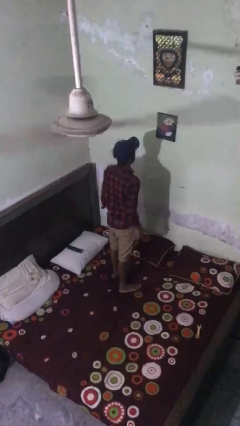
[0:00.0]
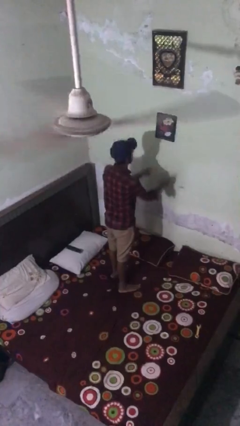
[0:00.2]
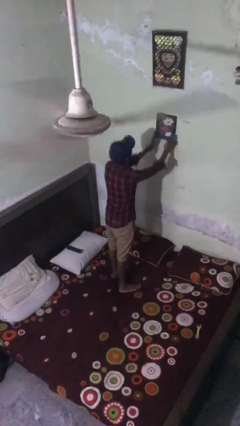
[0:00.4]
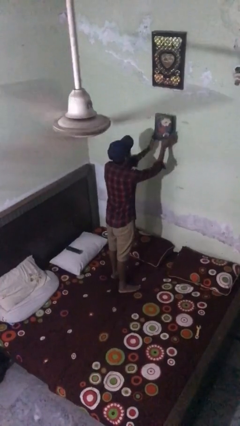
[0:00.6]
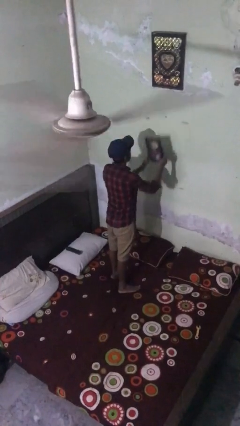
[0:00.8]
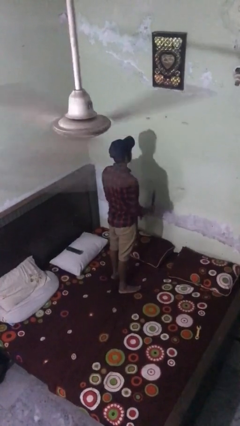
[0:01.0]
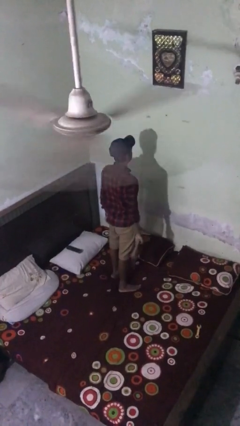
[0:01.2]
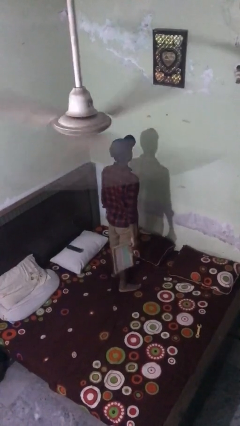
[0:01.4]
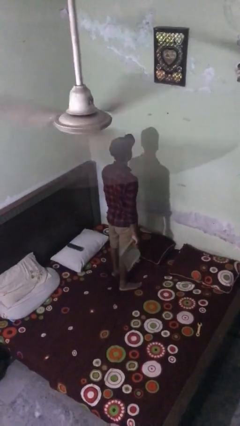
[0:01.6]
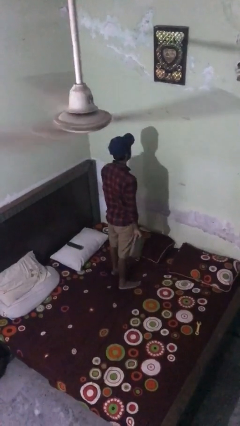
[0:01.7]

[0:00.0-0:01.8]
person takes down picture frame

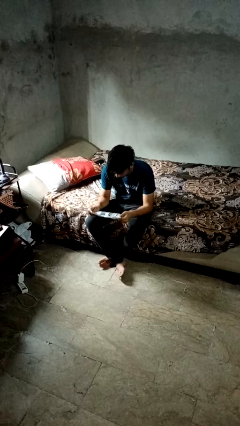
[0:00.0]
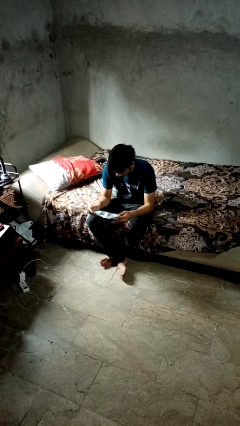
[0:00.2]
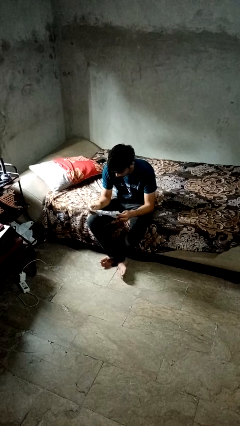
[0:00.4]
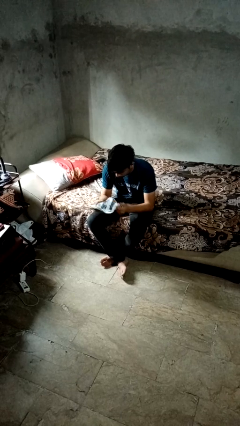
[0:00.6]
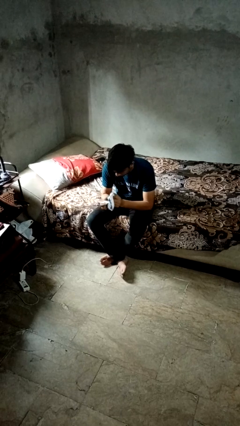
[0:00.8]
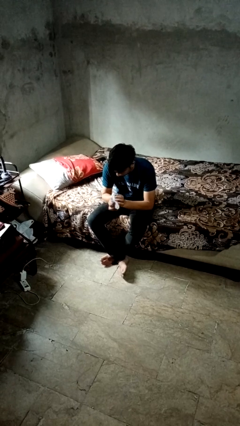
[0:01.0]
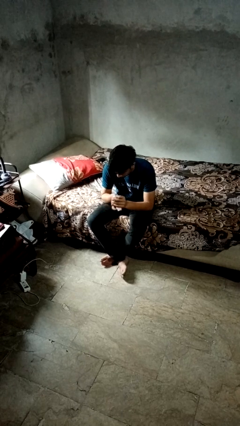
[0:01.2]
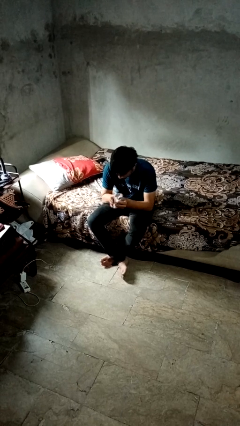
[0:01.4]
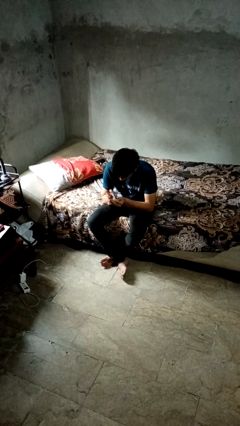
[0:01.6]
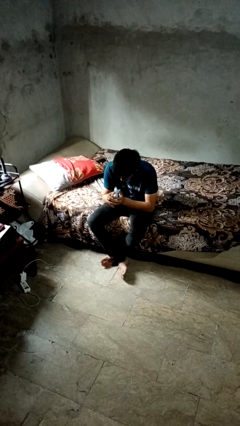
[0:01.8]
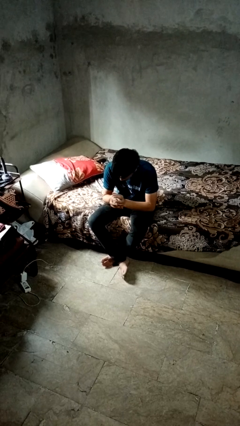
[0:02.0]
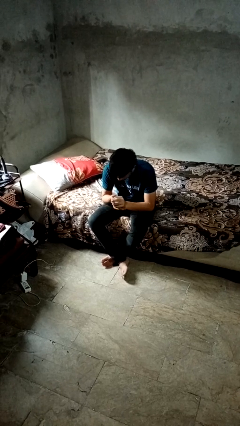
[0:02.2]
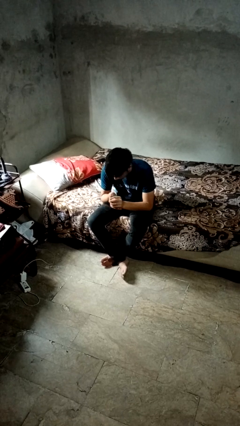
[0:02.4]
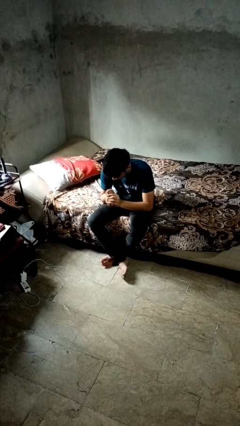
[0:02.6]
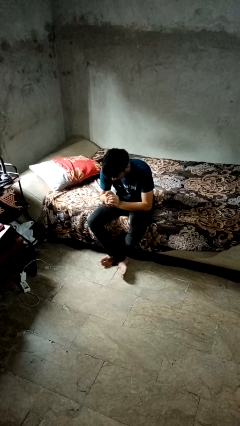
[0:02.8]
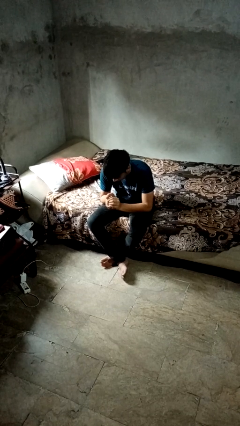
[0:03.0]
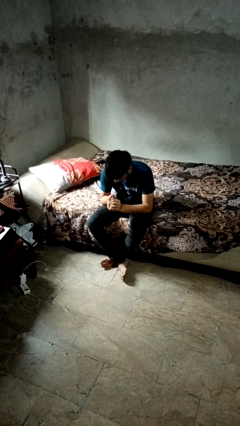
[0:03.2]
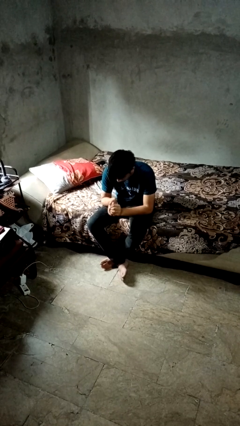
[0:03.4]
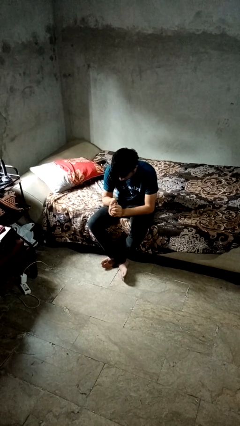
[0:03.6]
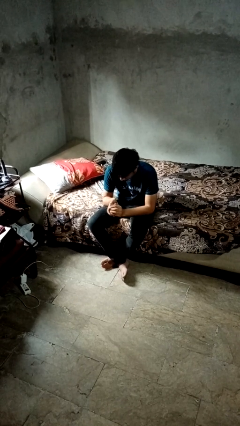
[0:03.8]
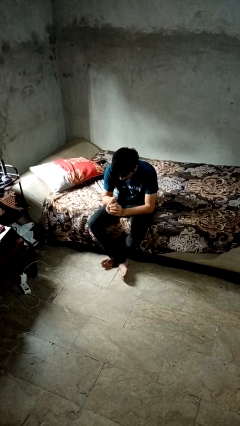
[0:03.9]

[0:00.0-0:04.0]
person crumples paper

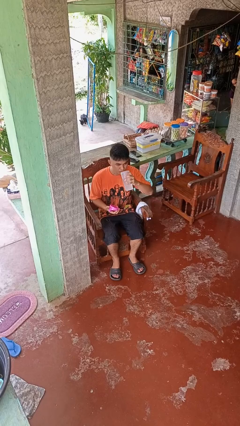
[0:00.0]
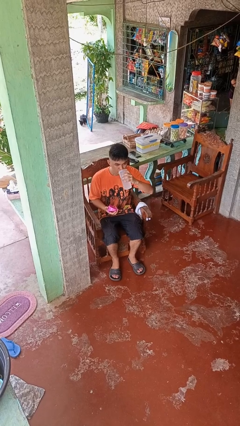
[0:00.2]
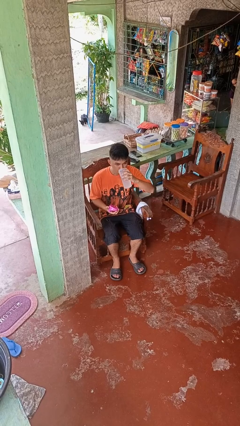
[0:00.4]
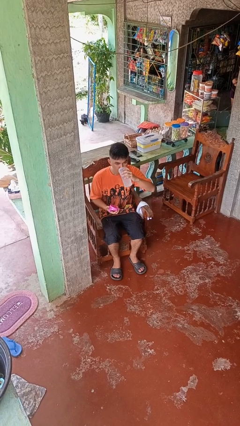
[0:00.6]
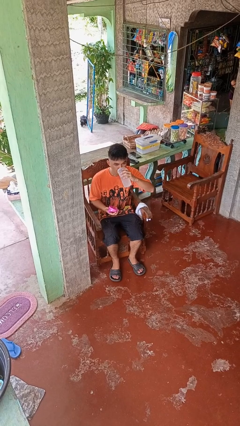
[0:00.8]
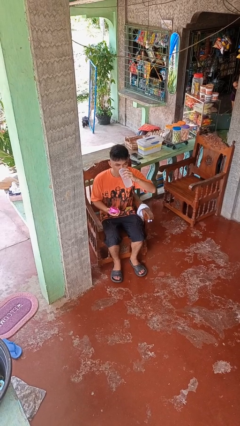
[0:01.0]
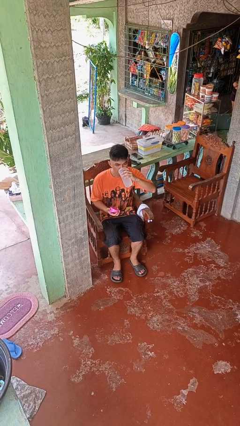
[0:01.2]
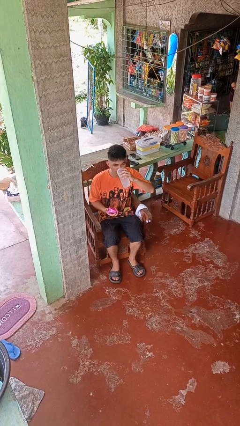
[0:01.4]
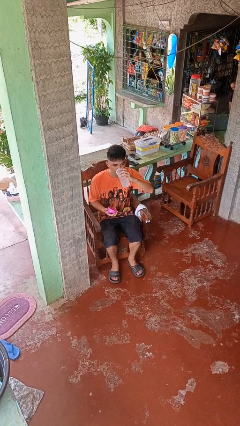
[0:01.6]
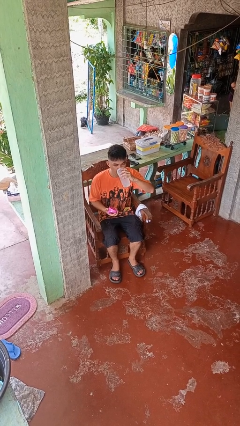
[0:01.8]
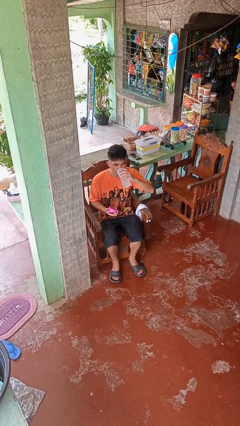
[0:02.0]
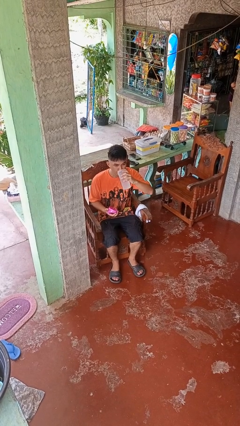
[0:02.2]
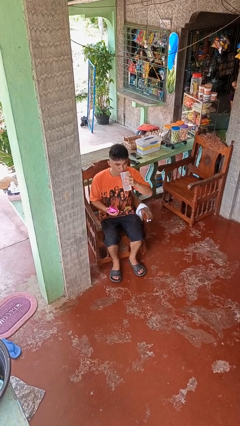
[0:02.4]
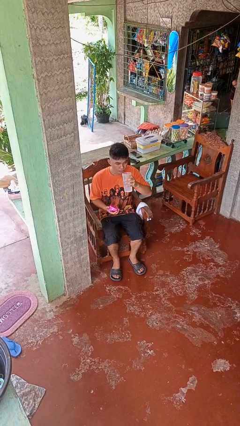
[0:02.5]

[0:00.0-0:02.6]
person drinks from bottle

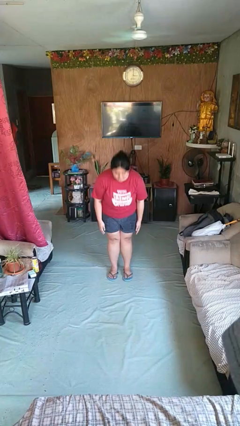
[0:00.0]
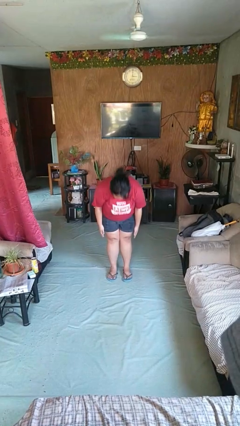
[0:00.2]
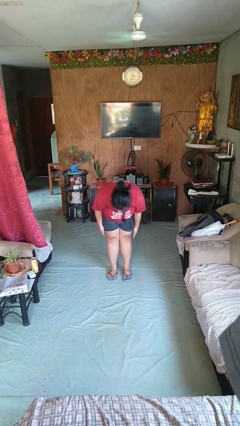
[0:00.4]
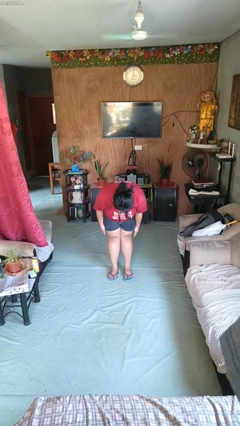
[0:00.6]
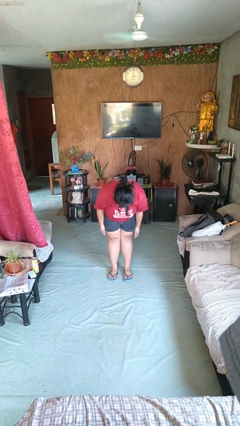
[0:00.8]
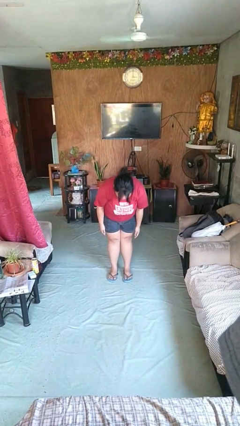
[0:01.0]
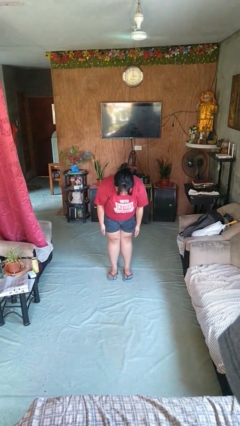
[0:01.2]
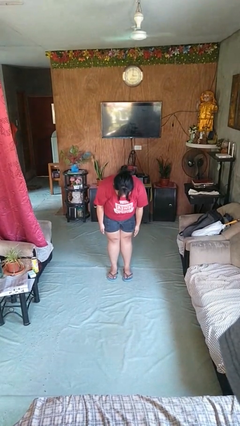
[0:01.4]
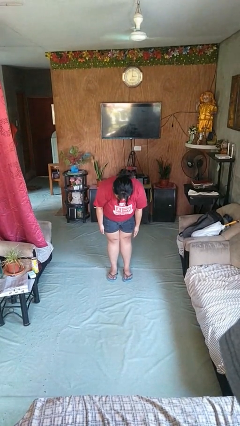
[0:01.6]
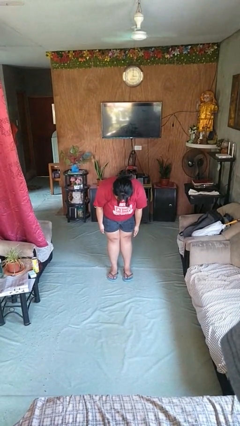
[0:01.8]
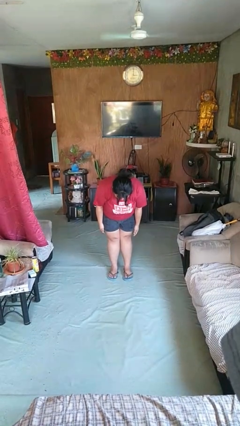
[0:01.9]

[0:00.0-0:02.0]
person bows

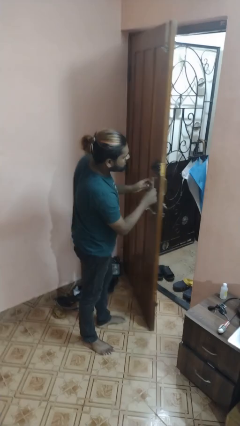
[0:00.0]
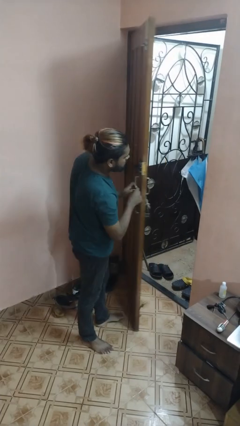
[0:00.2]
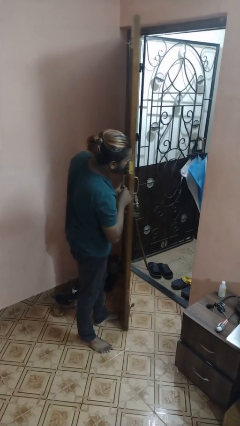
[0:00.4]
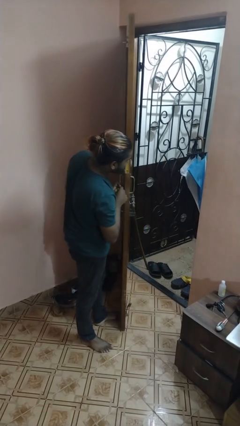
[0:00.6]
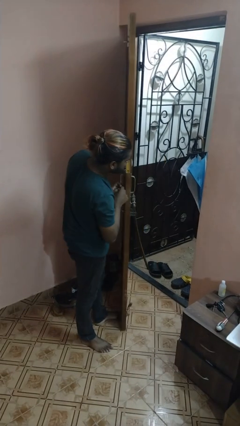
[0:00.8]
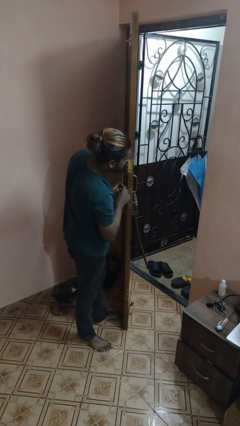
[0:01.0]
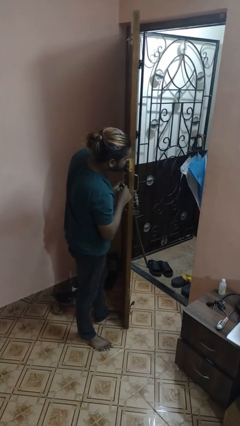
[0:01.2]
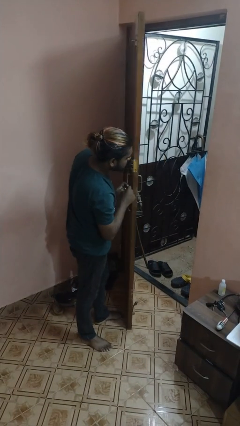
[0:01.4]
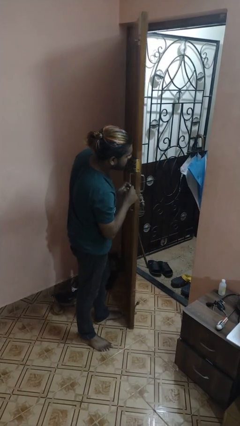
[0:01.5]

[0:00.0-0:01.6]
person opens facility door

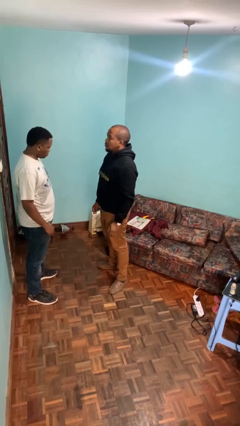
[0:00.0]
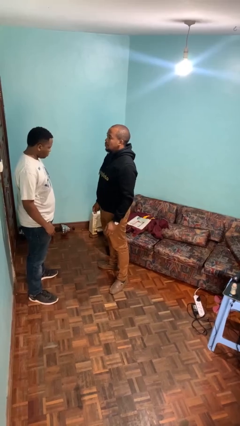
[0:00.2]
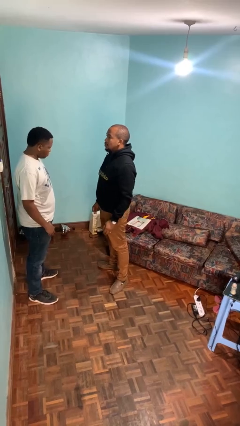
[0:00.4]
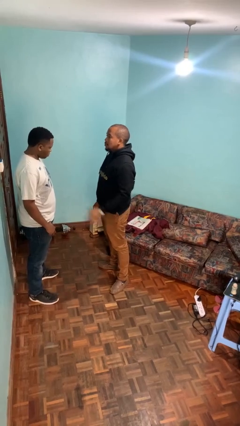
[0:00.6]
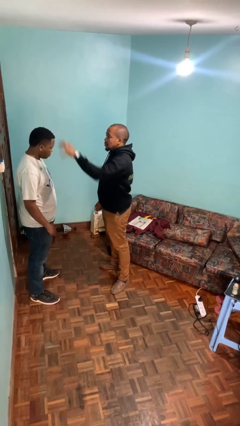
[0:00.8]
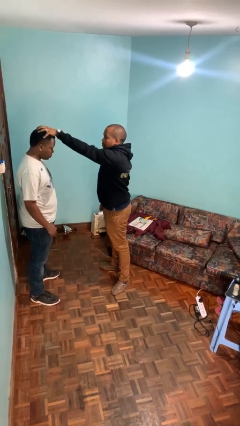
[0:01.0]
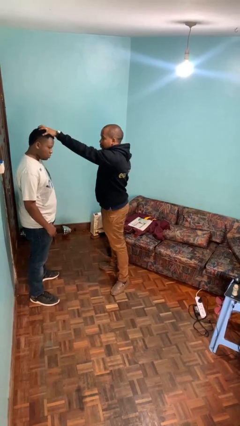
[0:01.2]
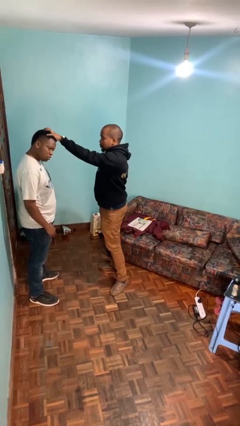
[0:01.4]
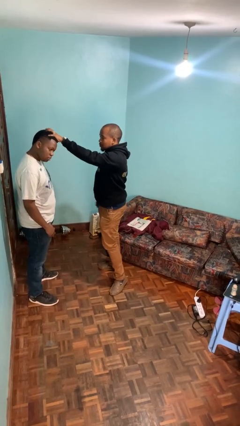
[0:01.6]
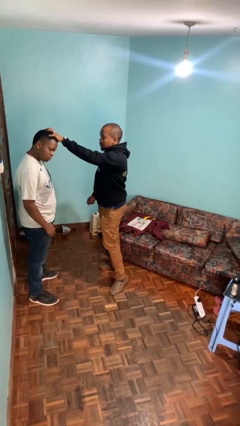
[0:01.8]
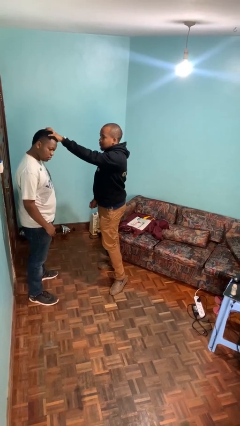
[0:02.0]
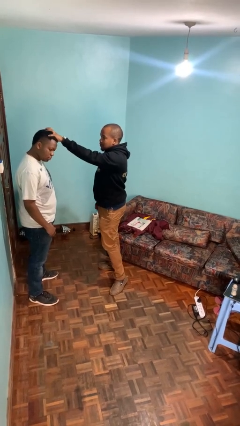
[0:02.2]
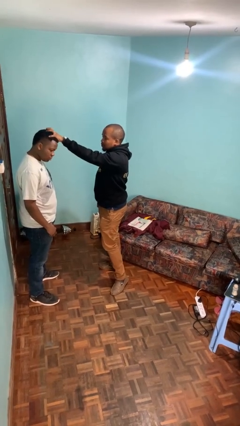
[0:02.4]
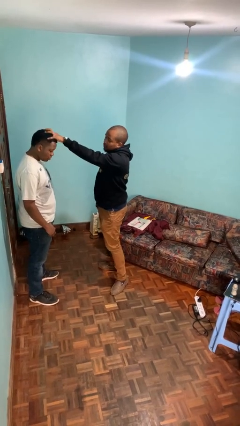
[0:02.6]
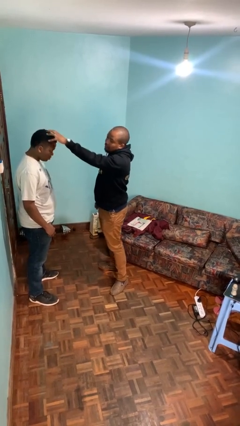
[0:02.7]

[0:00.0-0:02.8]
person grabs person by hair

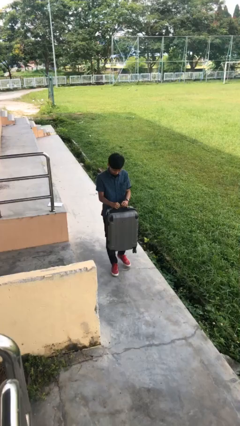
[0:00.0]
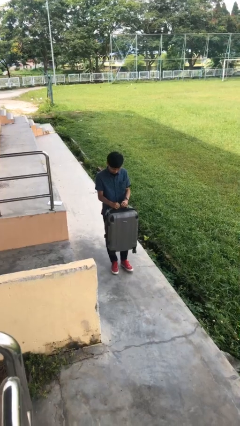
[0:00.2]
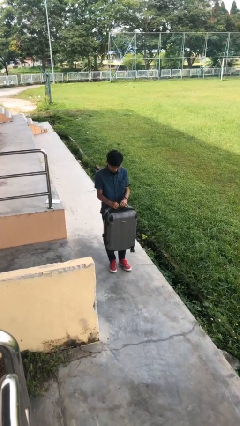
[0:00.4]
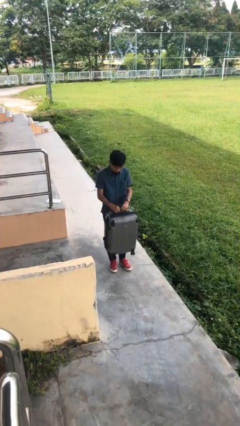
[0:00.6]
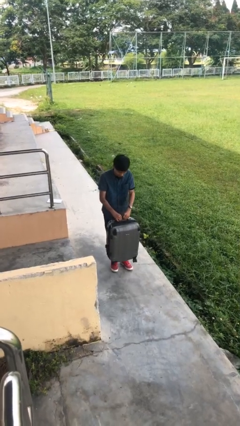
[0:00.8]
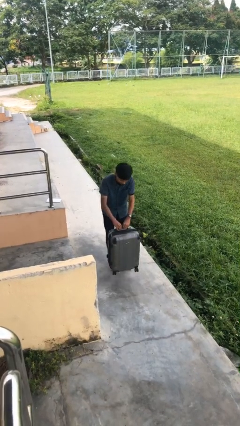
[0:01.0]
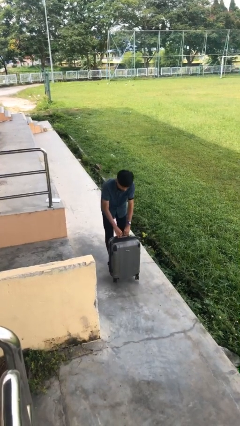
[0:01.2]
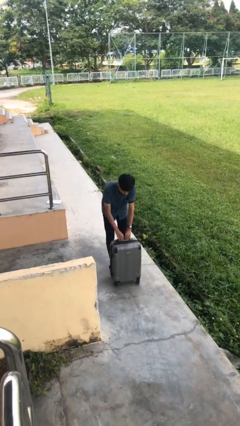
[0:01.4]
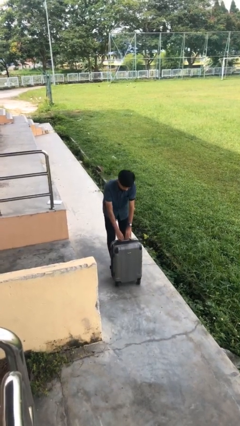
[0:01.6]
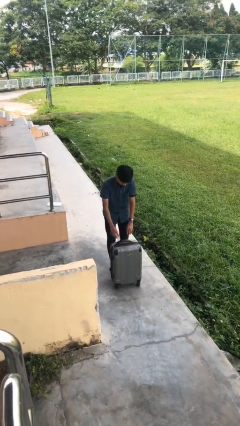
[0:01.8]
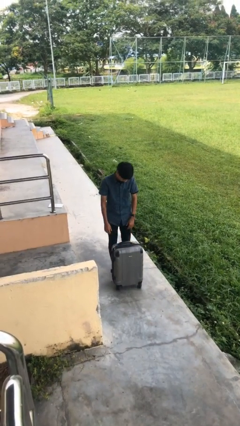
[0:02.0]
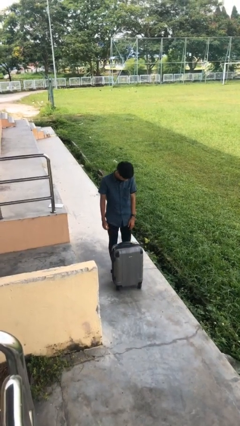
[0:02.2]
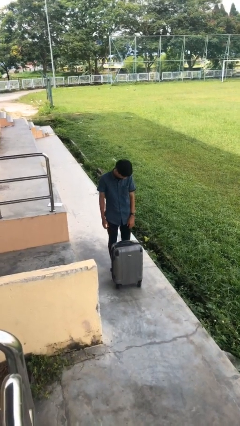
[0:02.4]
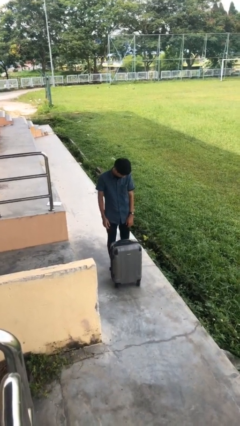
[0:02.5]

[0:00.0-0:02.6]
person puts down object on floor
